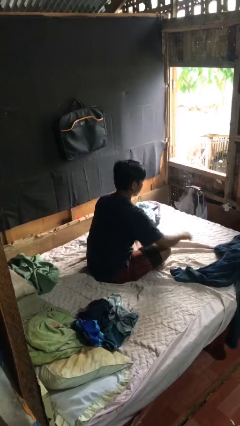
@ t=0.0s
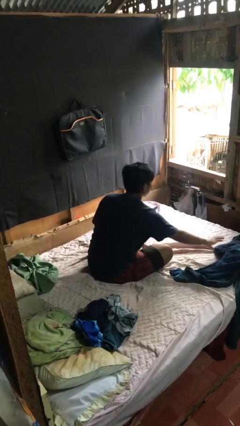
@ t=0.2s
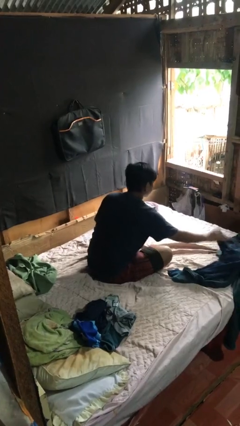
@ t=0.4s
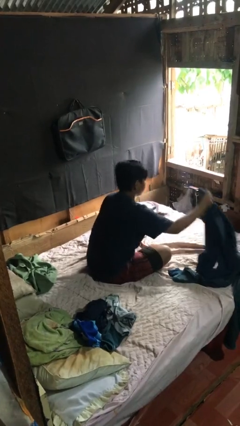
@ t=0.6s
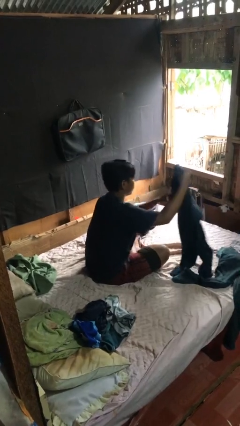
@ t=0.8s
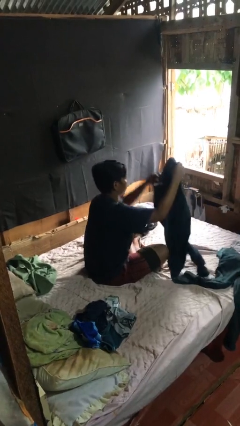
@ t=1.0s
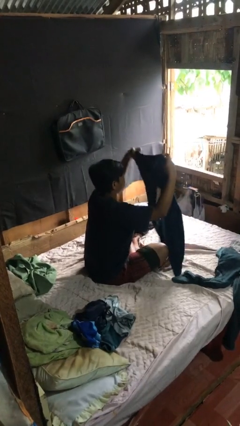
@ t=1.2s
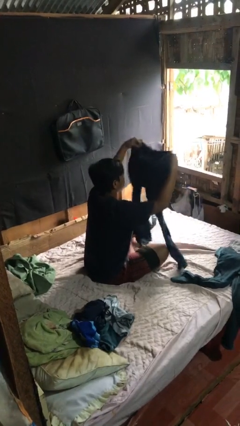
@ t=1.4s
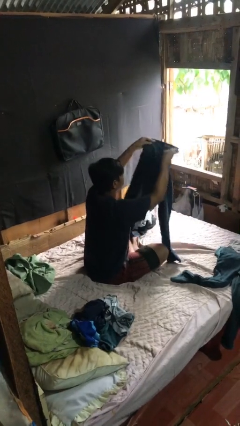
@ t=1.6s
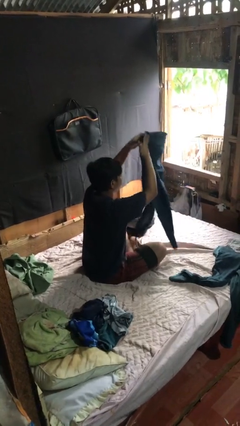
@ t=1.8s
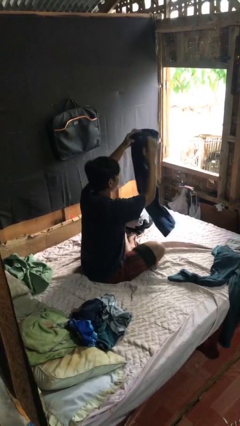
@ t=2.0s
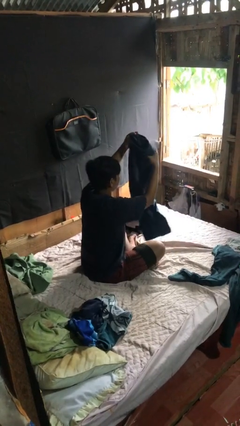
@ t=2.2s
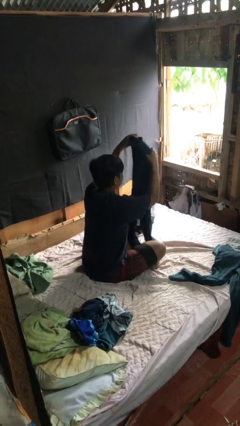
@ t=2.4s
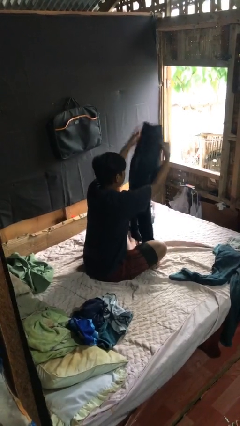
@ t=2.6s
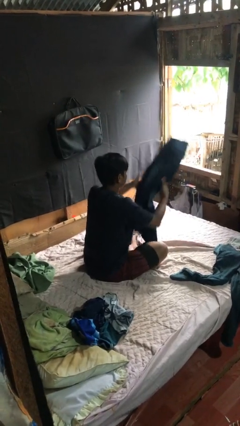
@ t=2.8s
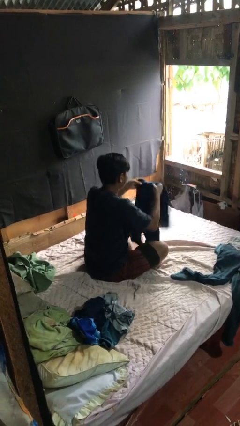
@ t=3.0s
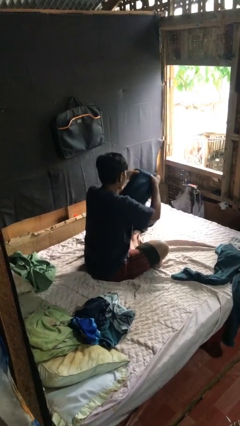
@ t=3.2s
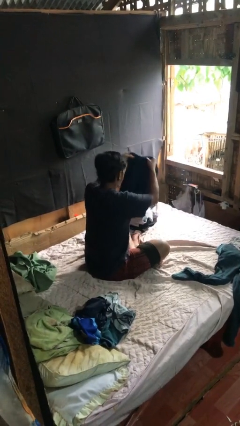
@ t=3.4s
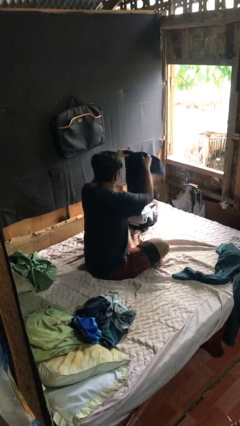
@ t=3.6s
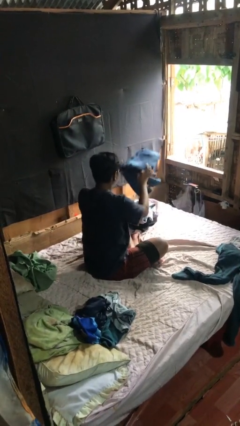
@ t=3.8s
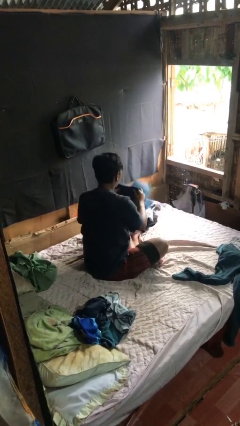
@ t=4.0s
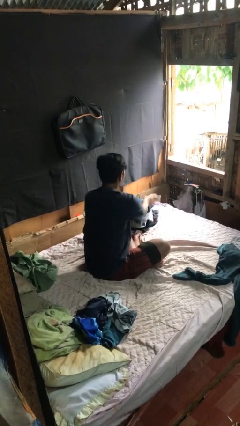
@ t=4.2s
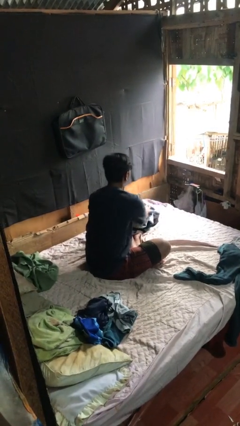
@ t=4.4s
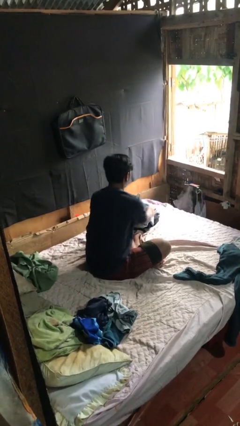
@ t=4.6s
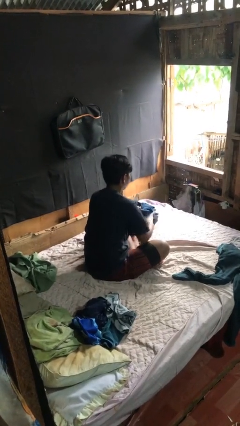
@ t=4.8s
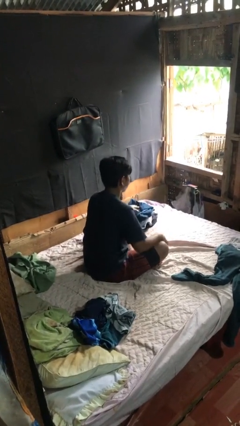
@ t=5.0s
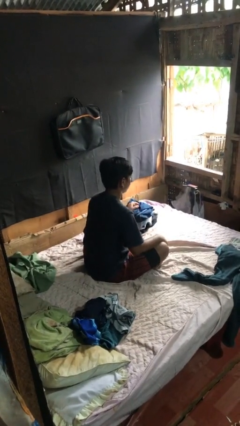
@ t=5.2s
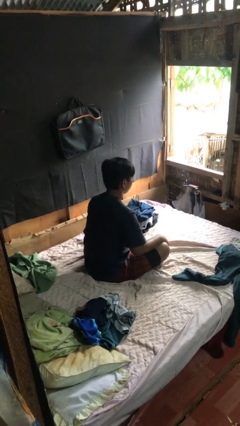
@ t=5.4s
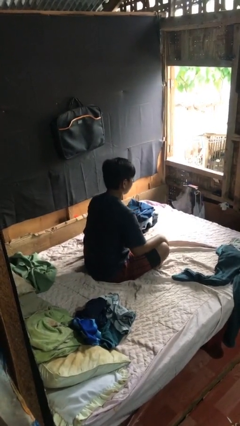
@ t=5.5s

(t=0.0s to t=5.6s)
person folds pants

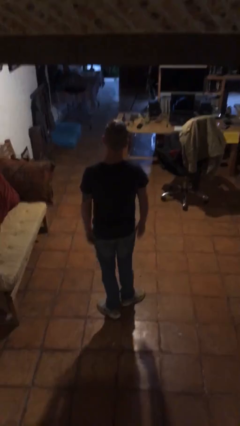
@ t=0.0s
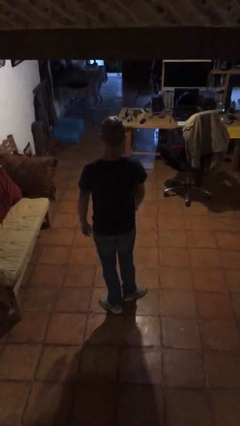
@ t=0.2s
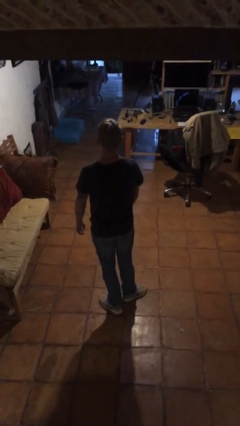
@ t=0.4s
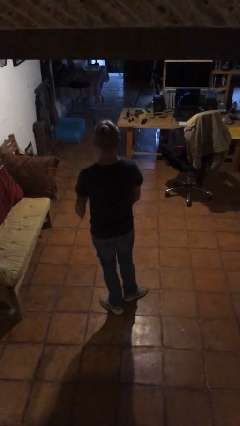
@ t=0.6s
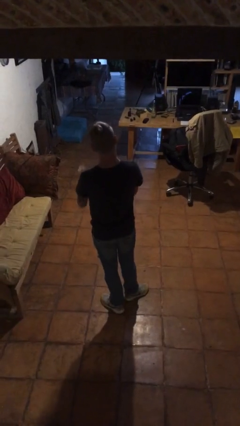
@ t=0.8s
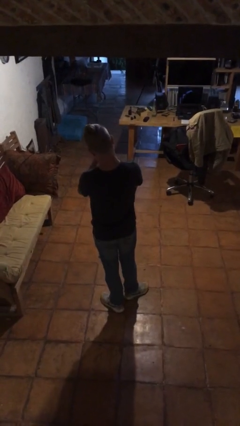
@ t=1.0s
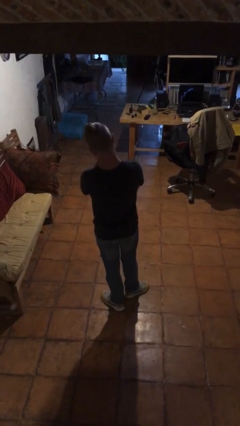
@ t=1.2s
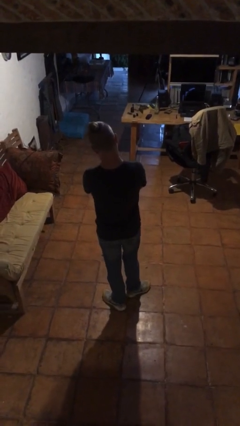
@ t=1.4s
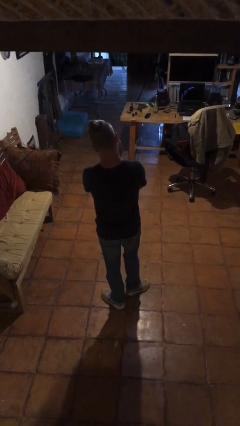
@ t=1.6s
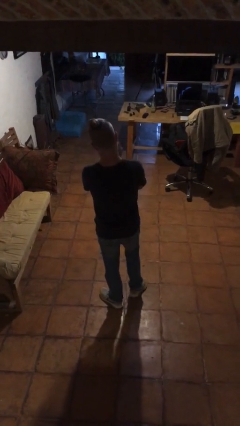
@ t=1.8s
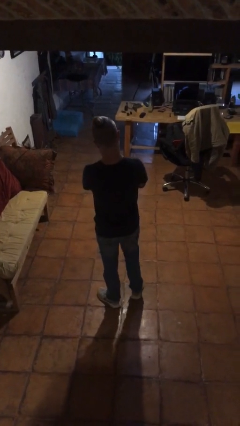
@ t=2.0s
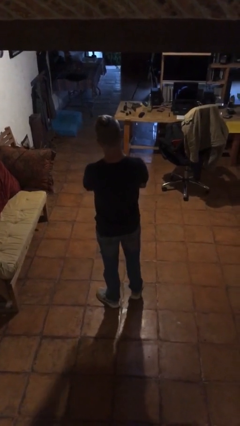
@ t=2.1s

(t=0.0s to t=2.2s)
person claps hands

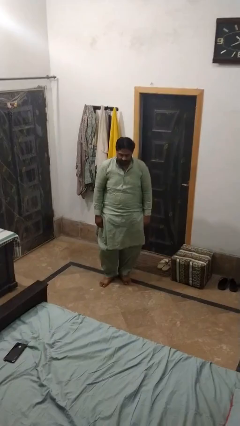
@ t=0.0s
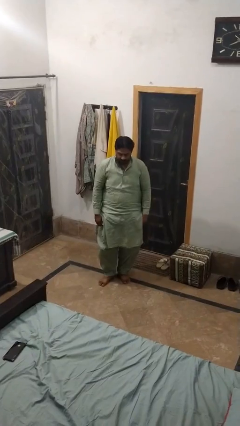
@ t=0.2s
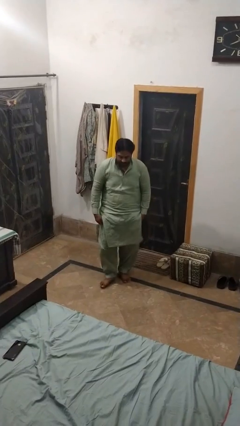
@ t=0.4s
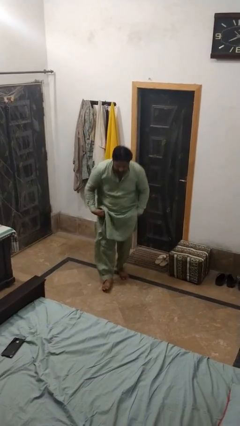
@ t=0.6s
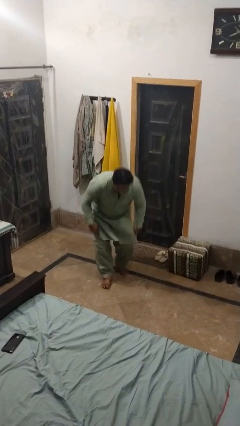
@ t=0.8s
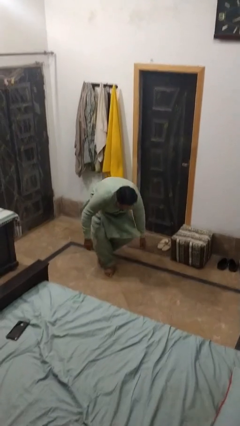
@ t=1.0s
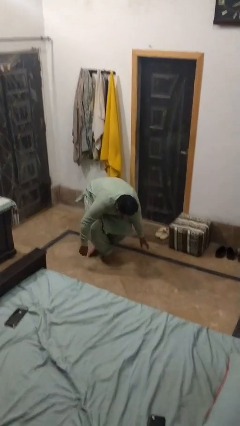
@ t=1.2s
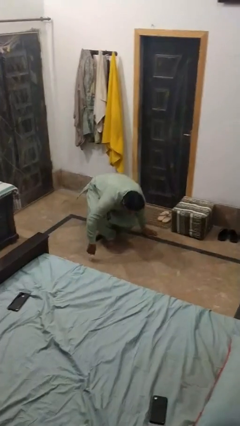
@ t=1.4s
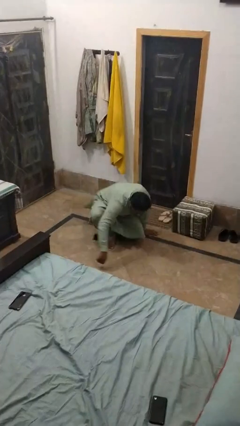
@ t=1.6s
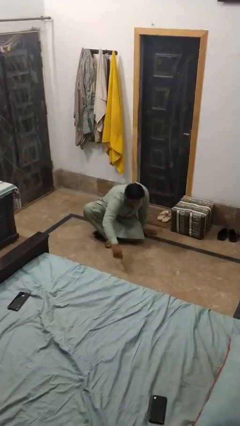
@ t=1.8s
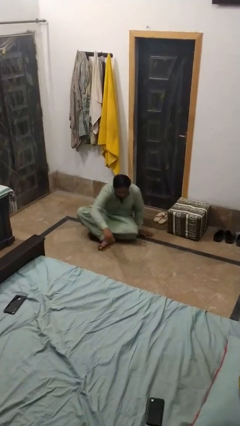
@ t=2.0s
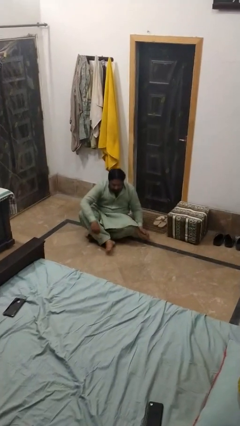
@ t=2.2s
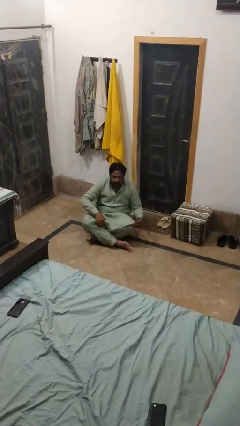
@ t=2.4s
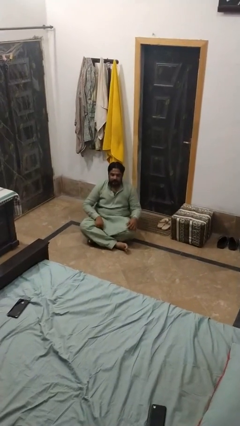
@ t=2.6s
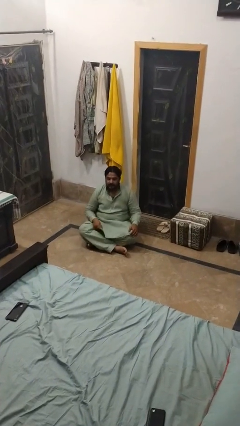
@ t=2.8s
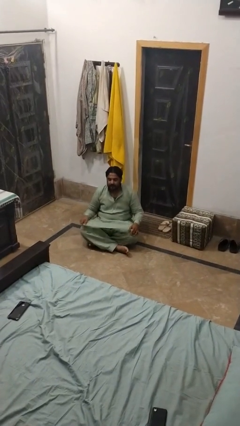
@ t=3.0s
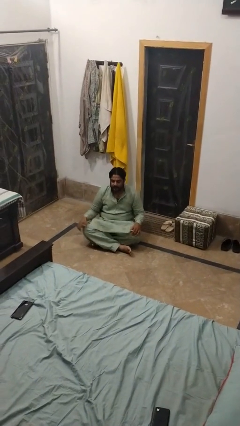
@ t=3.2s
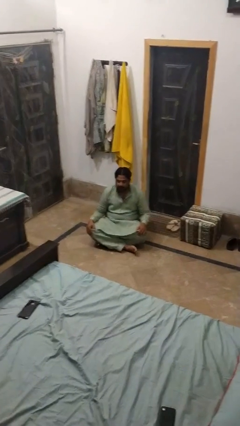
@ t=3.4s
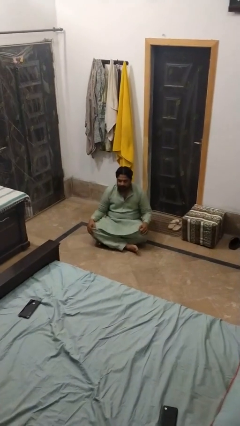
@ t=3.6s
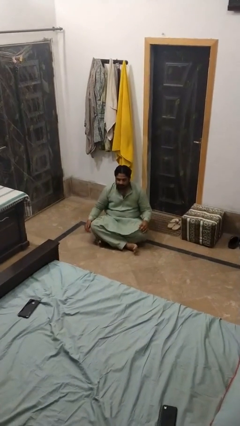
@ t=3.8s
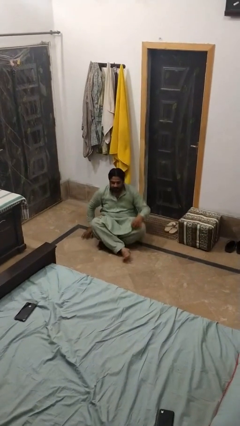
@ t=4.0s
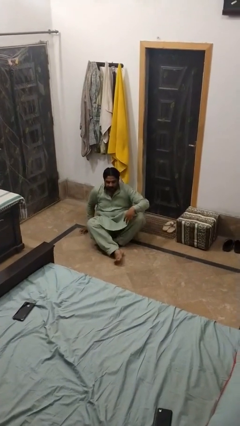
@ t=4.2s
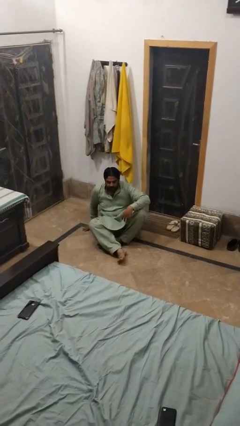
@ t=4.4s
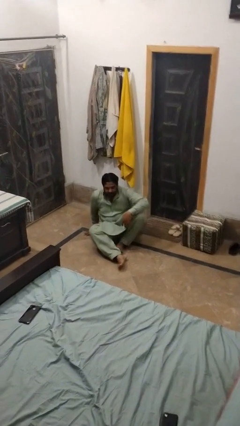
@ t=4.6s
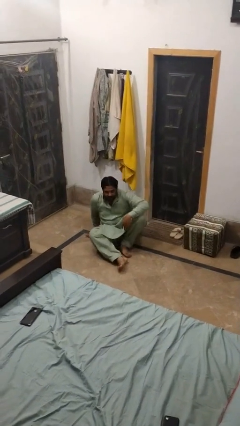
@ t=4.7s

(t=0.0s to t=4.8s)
person sits crisscross

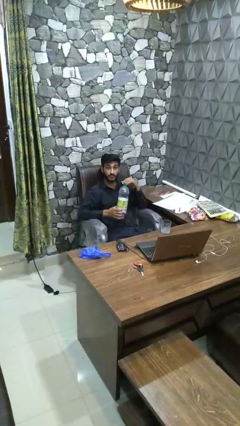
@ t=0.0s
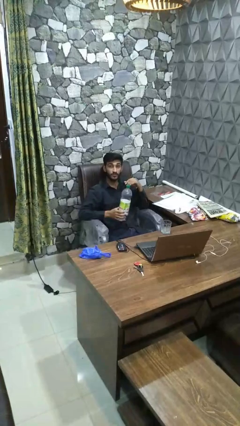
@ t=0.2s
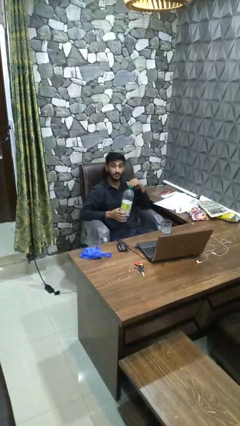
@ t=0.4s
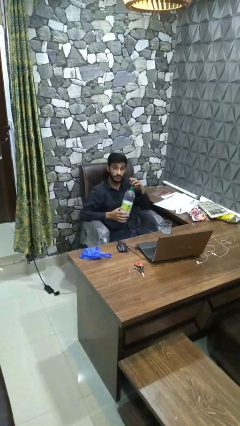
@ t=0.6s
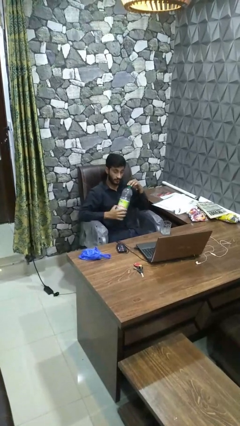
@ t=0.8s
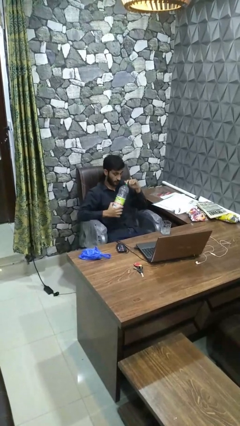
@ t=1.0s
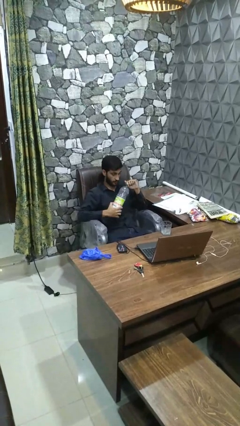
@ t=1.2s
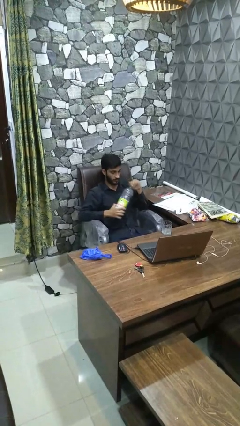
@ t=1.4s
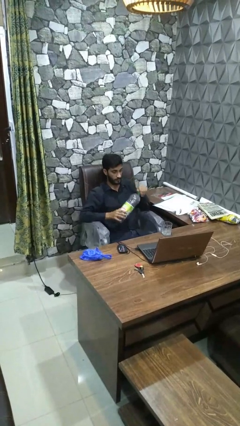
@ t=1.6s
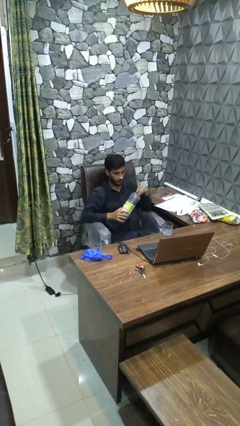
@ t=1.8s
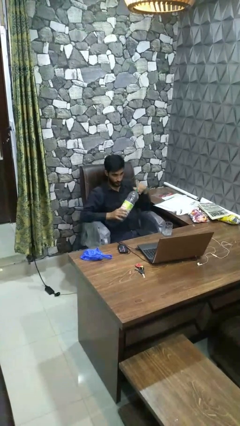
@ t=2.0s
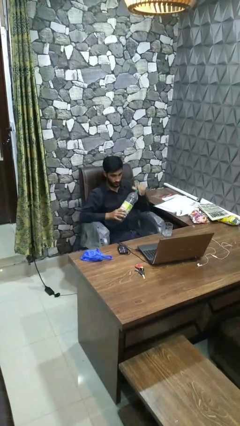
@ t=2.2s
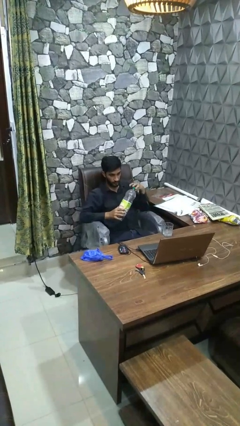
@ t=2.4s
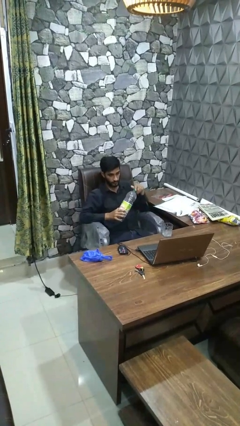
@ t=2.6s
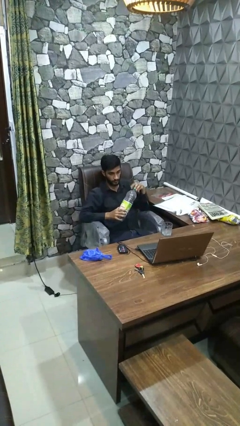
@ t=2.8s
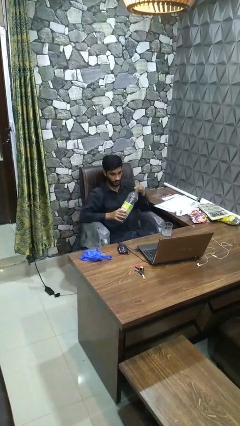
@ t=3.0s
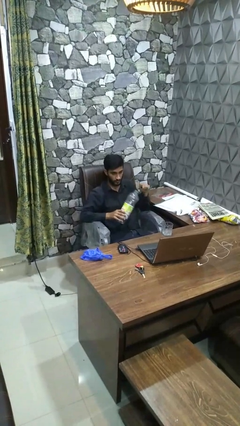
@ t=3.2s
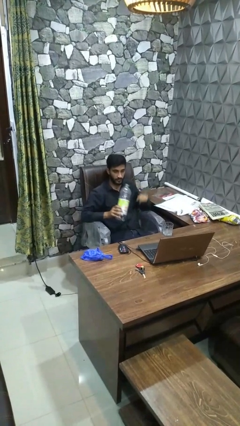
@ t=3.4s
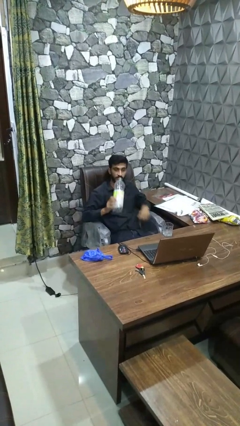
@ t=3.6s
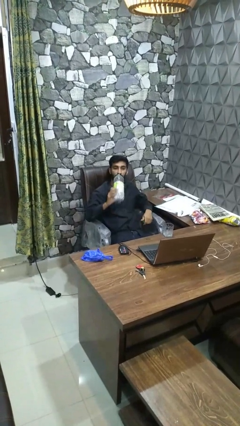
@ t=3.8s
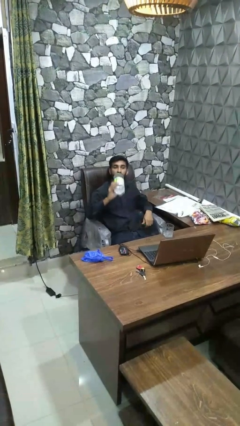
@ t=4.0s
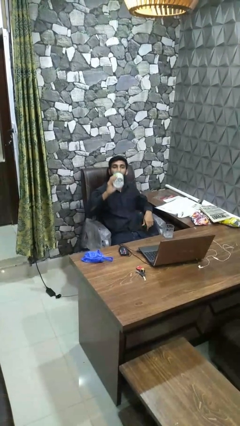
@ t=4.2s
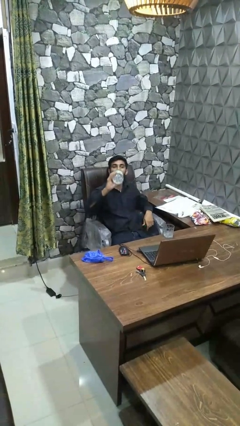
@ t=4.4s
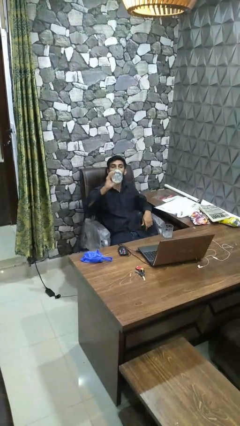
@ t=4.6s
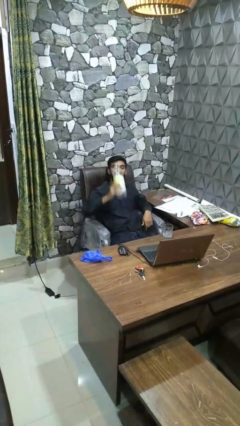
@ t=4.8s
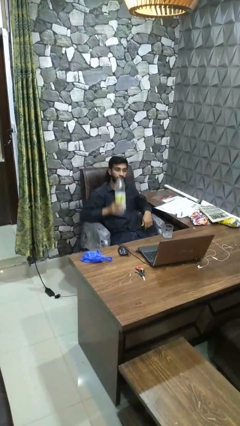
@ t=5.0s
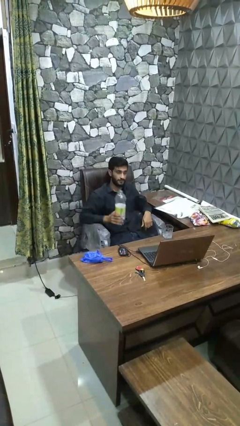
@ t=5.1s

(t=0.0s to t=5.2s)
person drinks from bottle
